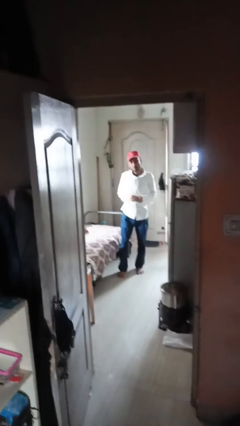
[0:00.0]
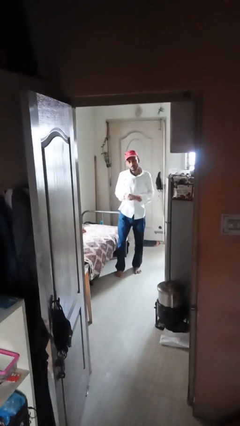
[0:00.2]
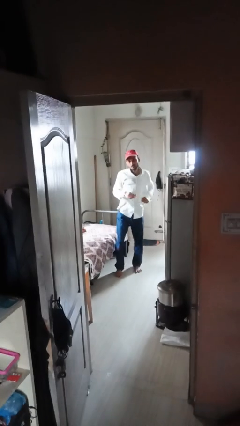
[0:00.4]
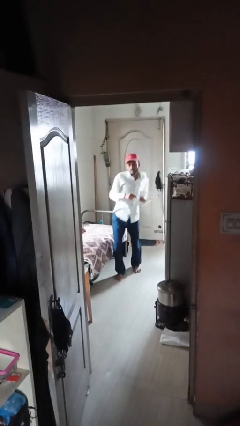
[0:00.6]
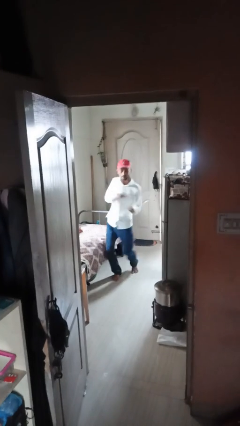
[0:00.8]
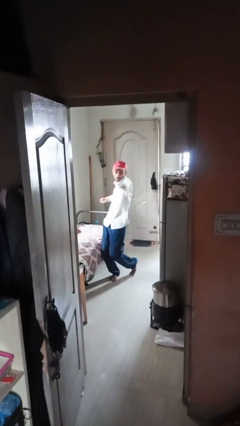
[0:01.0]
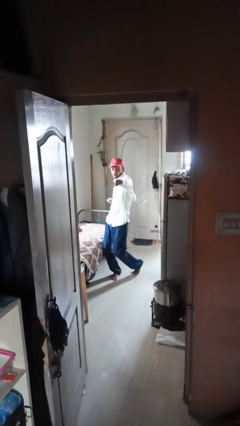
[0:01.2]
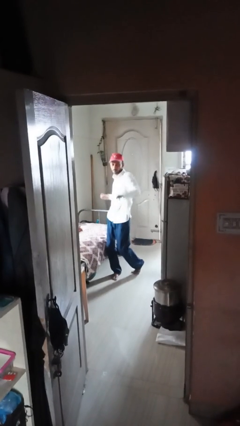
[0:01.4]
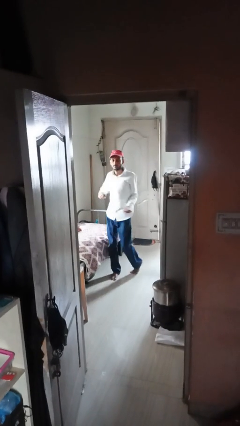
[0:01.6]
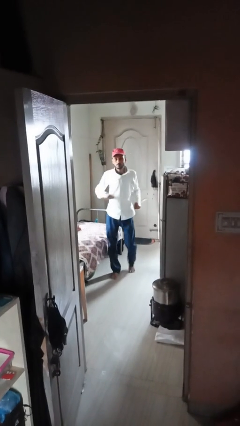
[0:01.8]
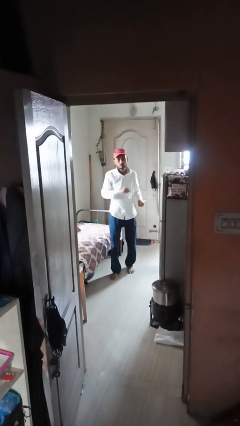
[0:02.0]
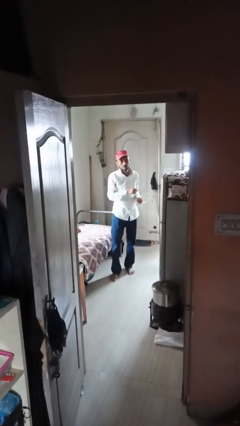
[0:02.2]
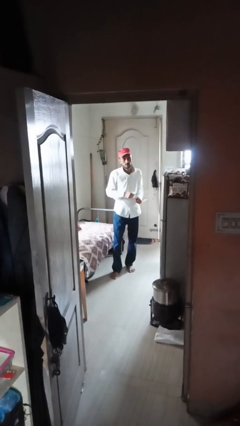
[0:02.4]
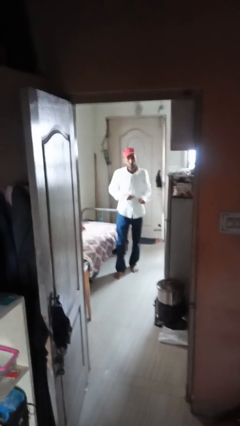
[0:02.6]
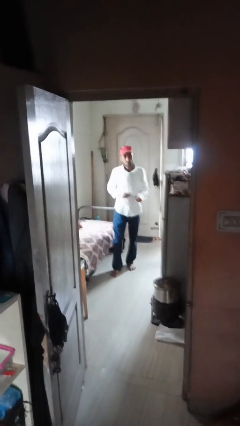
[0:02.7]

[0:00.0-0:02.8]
person punches

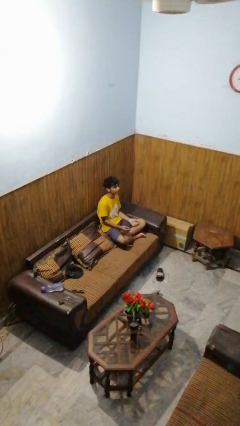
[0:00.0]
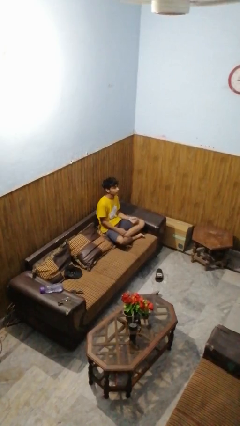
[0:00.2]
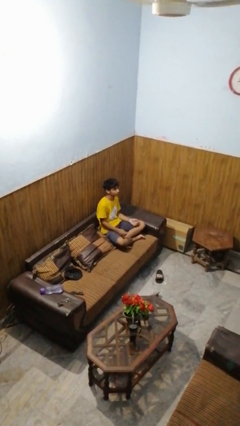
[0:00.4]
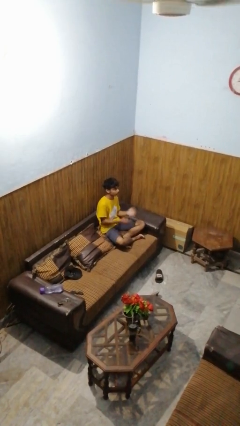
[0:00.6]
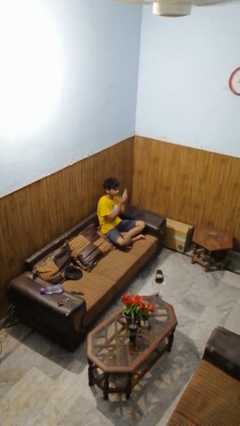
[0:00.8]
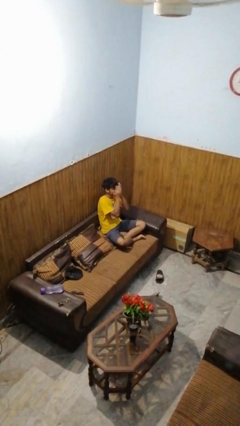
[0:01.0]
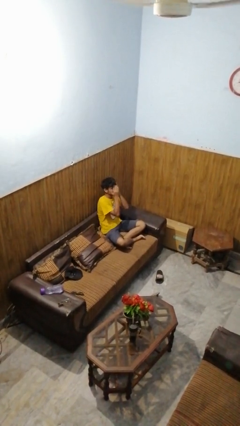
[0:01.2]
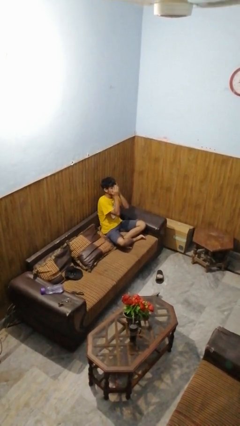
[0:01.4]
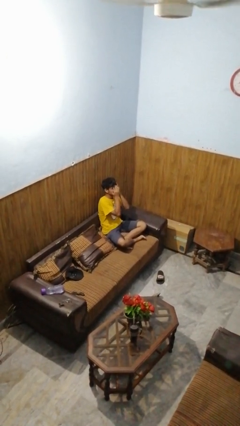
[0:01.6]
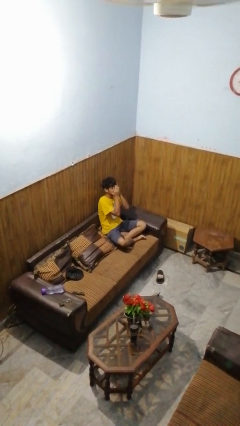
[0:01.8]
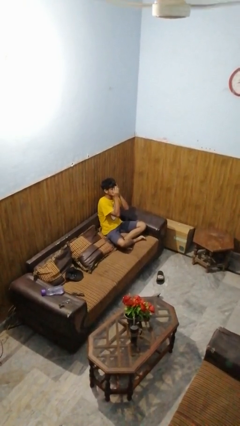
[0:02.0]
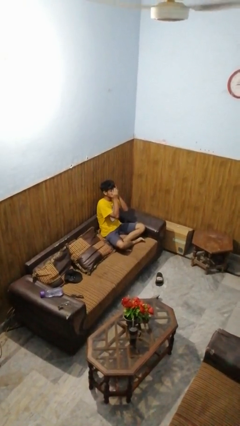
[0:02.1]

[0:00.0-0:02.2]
person covers face with hands

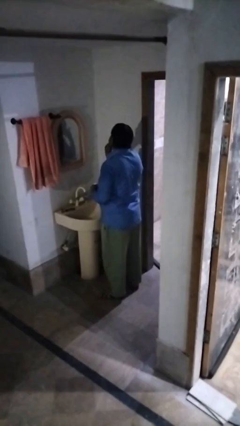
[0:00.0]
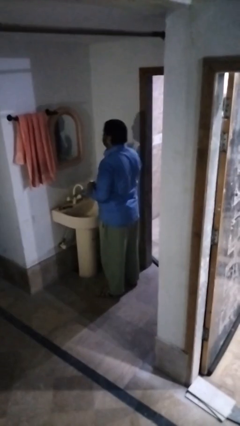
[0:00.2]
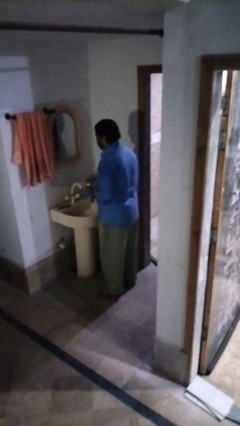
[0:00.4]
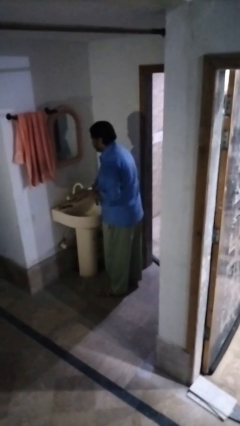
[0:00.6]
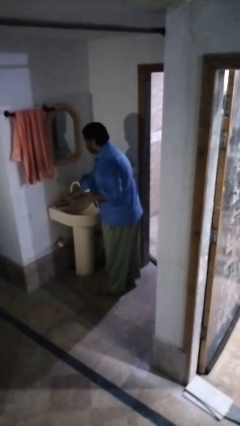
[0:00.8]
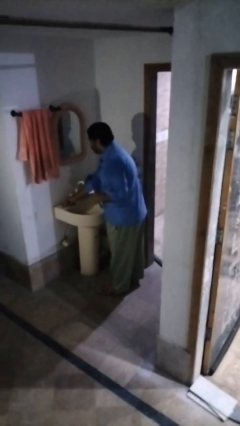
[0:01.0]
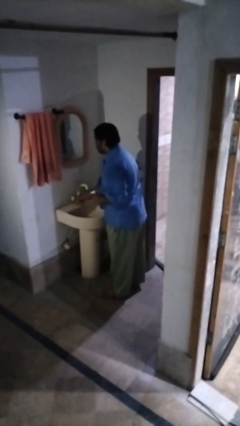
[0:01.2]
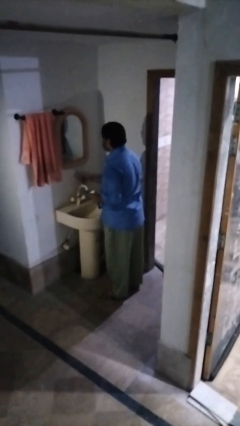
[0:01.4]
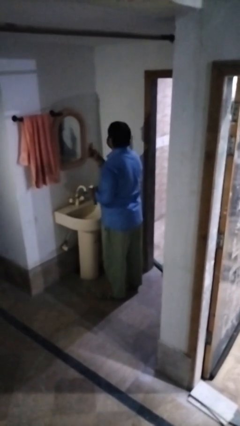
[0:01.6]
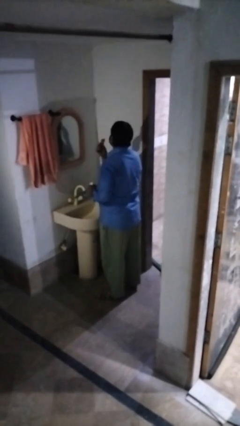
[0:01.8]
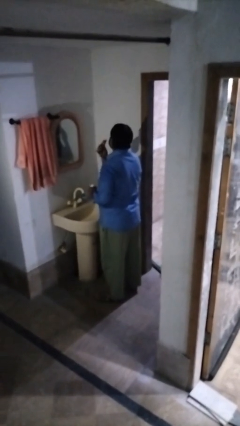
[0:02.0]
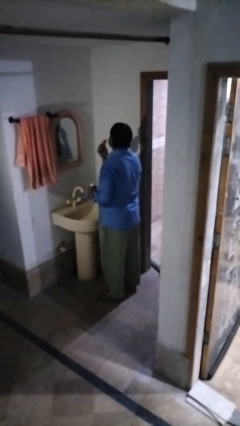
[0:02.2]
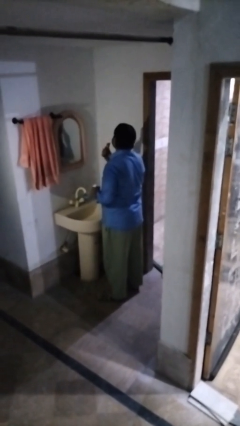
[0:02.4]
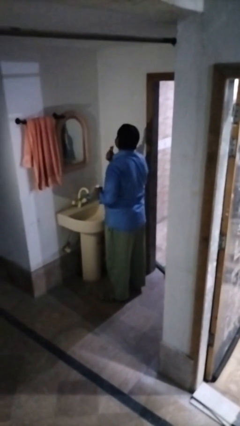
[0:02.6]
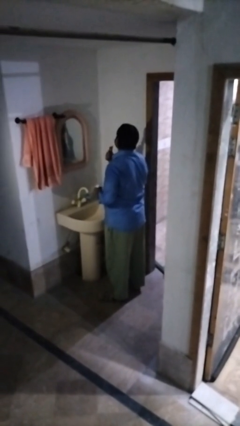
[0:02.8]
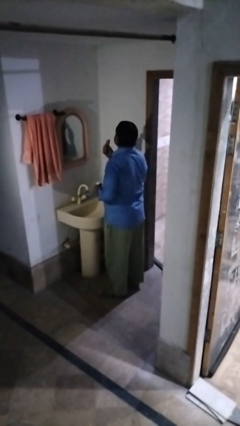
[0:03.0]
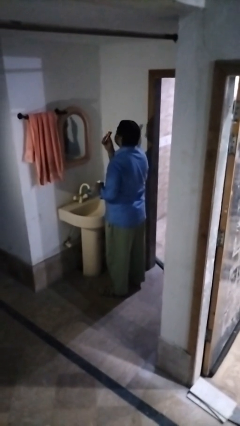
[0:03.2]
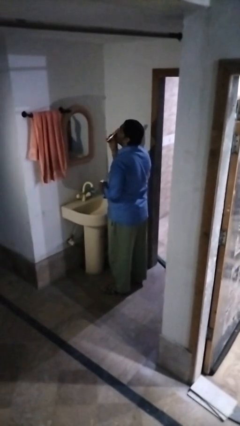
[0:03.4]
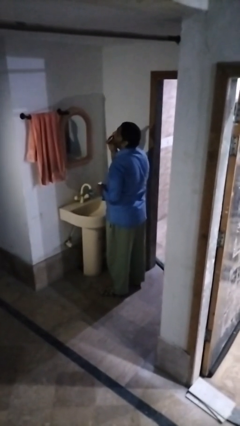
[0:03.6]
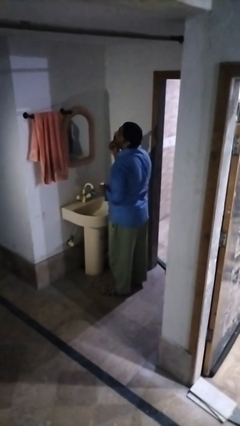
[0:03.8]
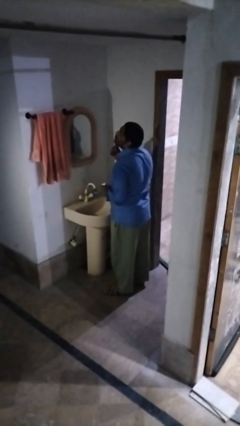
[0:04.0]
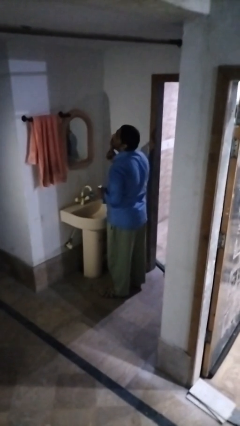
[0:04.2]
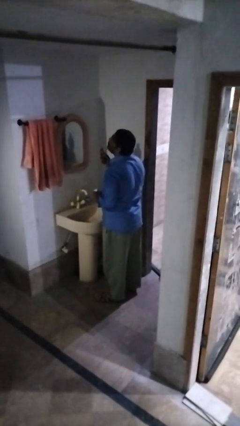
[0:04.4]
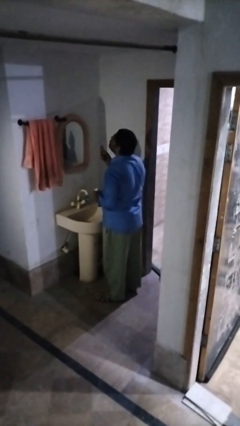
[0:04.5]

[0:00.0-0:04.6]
person shaves face

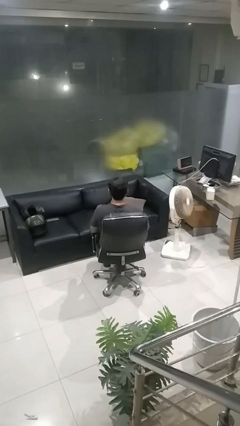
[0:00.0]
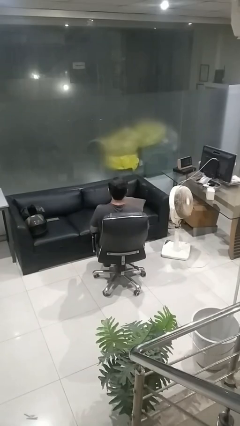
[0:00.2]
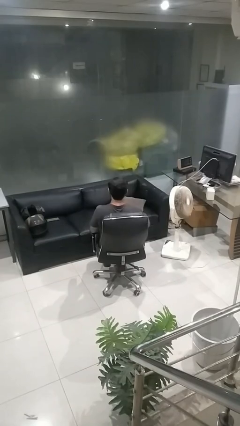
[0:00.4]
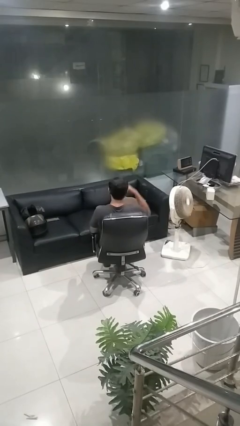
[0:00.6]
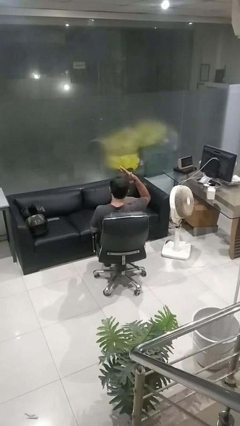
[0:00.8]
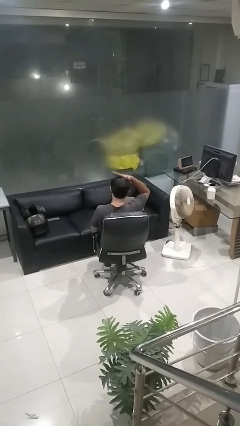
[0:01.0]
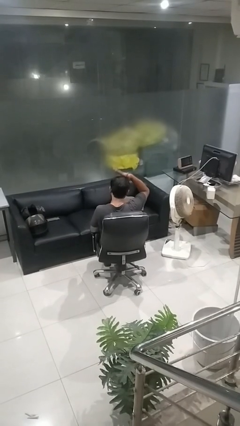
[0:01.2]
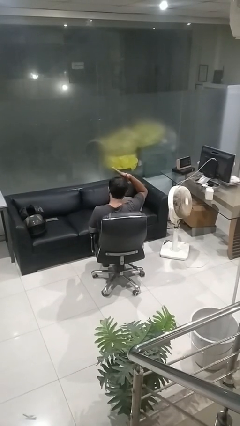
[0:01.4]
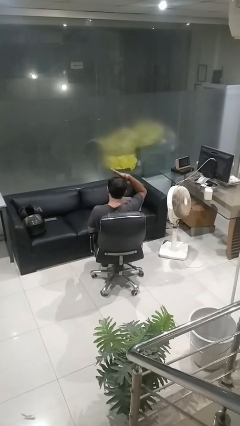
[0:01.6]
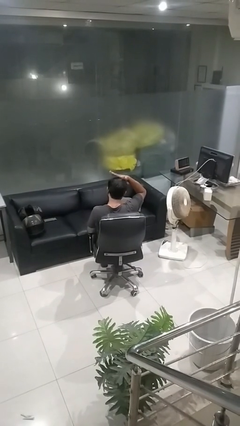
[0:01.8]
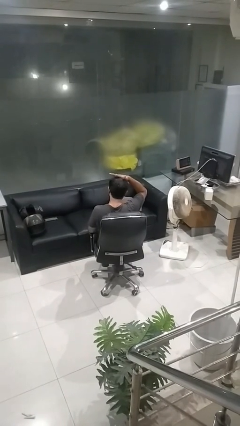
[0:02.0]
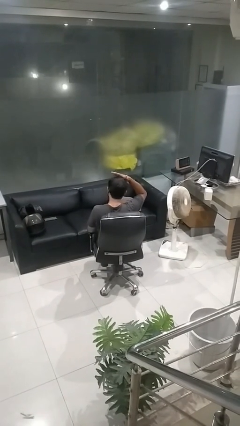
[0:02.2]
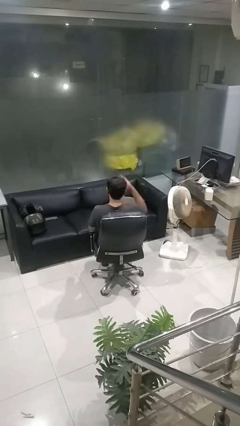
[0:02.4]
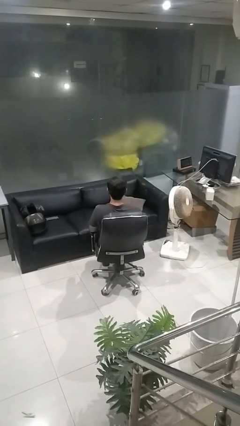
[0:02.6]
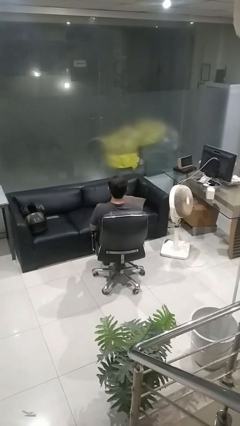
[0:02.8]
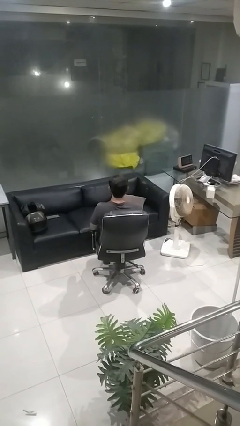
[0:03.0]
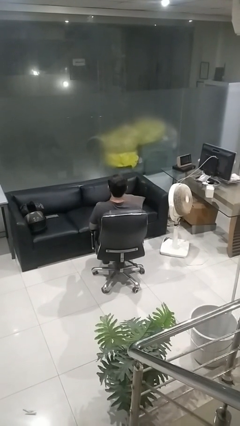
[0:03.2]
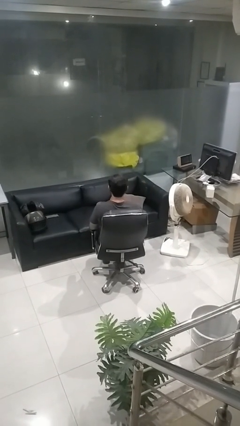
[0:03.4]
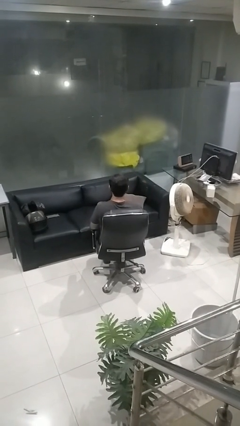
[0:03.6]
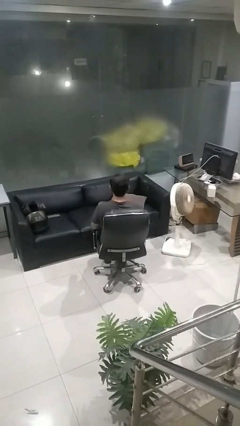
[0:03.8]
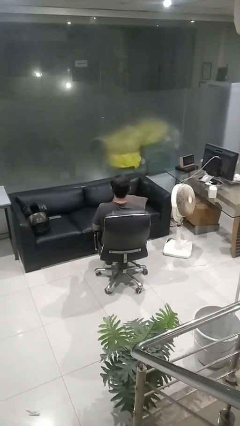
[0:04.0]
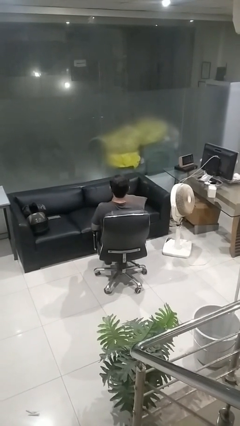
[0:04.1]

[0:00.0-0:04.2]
person pats head

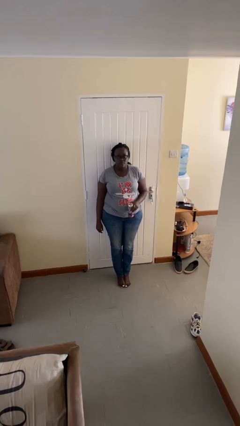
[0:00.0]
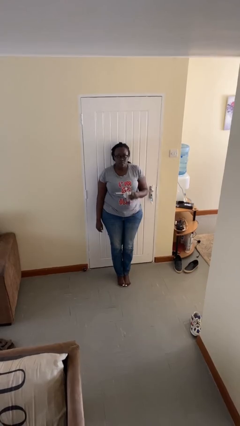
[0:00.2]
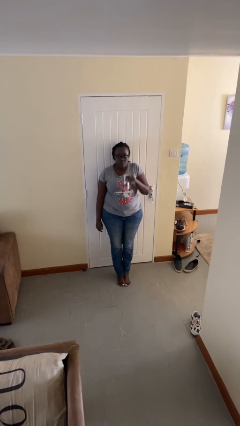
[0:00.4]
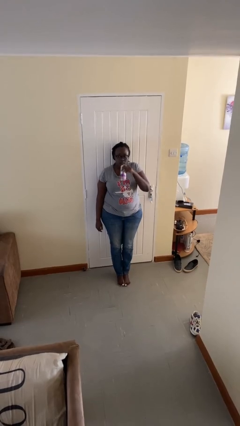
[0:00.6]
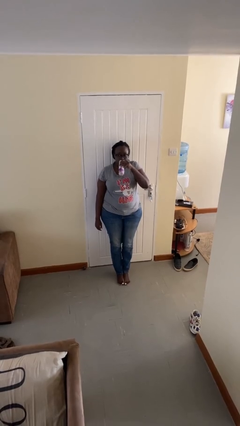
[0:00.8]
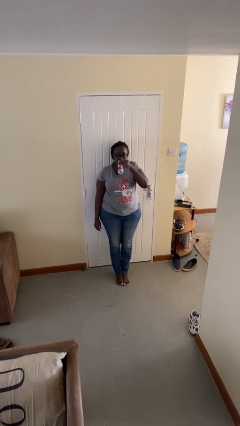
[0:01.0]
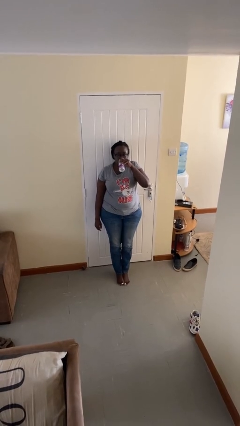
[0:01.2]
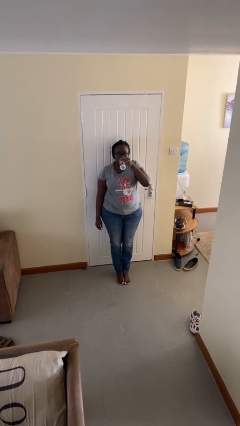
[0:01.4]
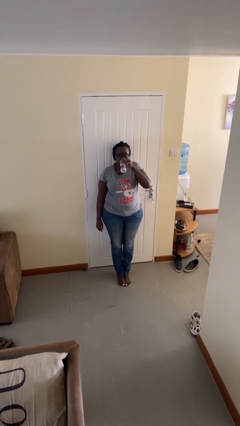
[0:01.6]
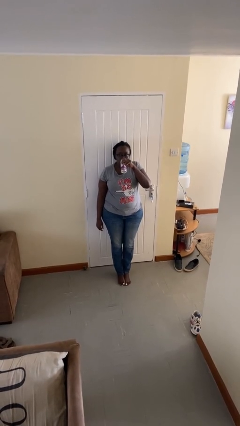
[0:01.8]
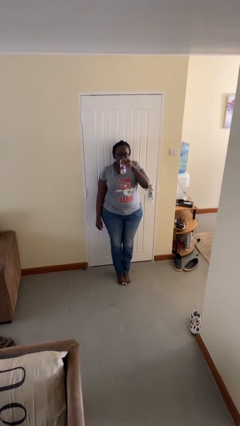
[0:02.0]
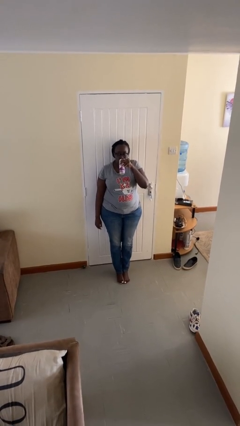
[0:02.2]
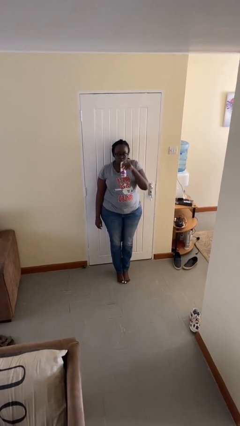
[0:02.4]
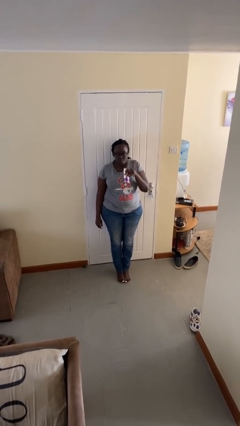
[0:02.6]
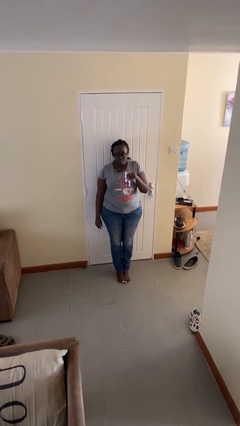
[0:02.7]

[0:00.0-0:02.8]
person drinks from beverage can

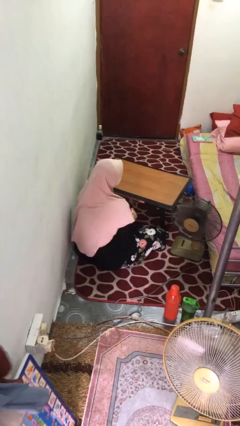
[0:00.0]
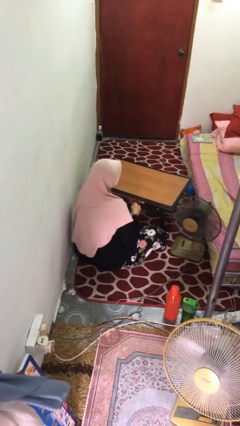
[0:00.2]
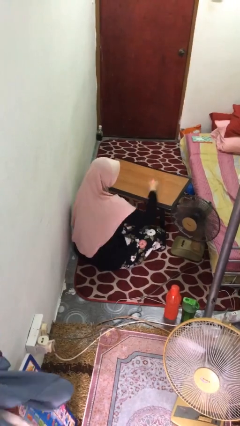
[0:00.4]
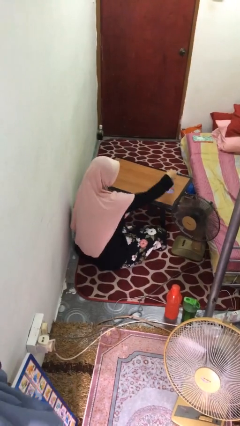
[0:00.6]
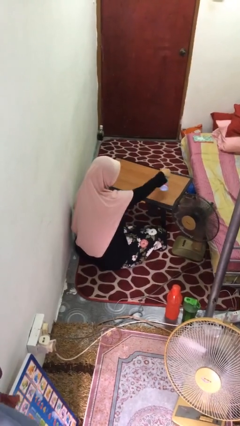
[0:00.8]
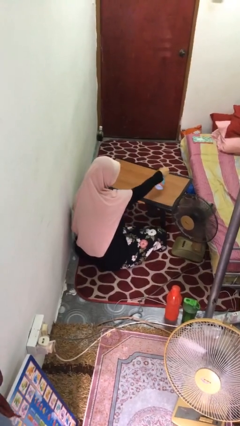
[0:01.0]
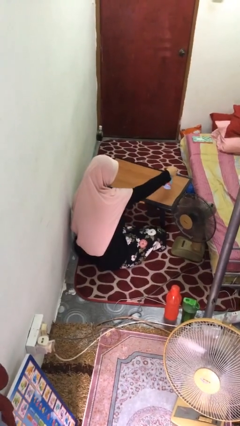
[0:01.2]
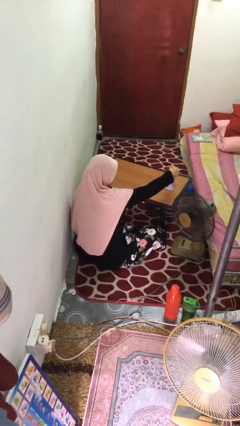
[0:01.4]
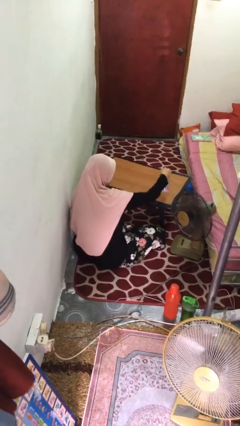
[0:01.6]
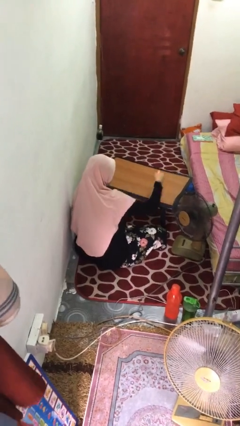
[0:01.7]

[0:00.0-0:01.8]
person sprays from bottle
